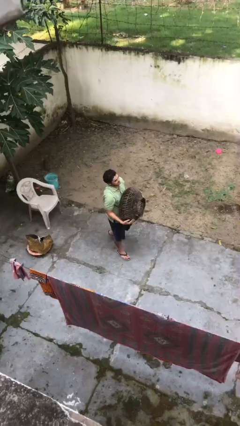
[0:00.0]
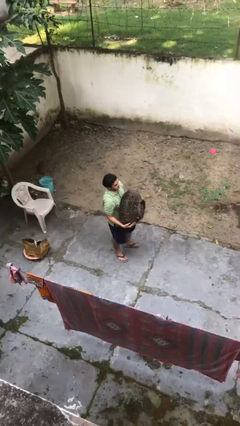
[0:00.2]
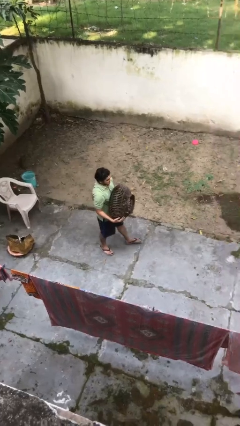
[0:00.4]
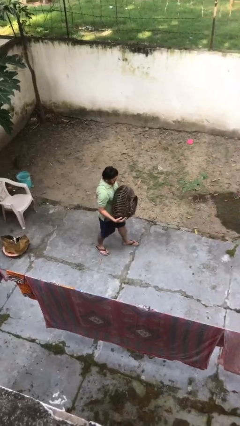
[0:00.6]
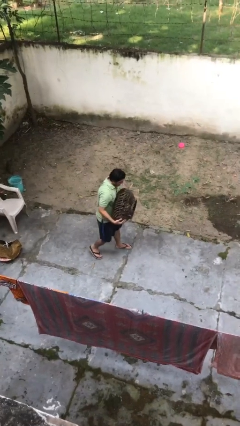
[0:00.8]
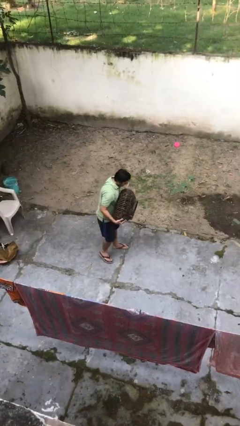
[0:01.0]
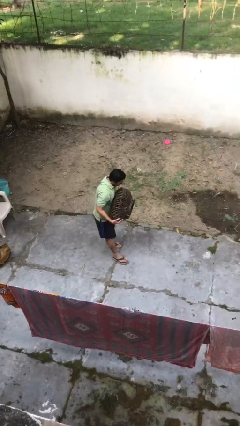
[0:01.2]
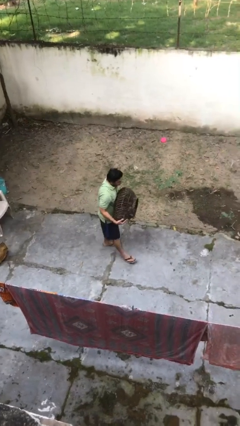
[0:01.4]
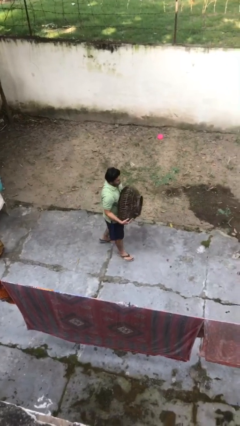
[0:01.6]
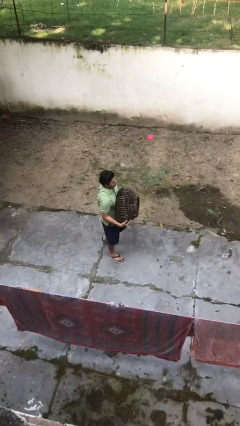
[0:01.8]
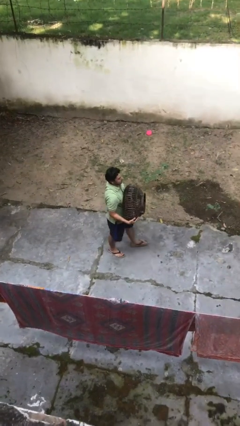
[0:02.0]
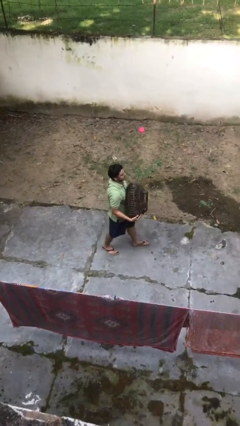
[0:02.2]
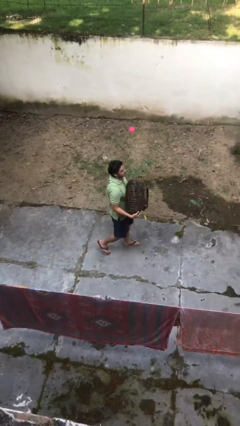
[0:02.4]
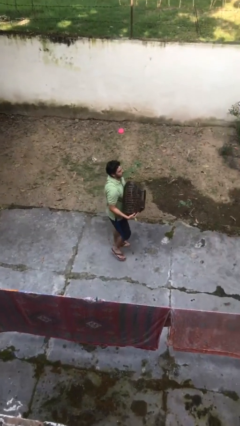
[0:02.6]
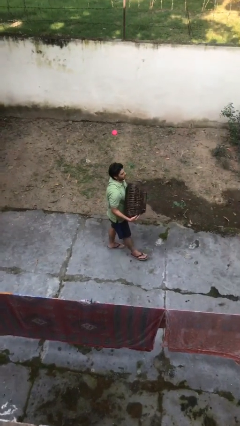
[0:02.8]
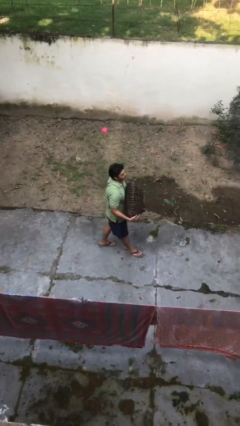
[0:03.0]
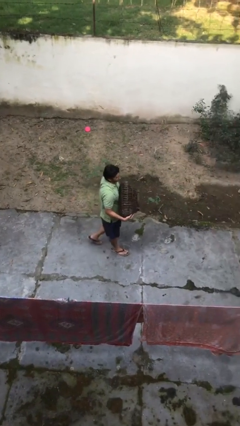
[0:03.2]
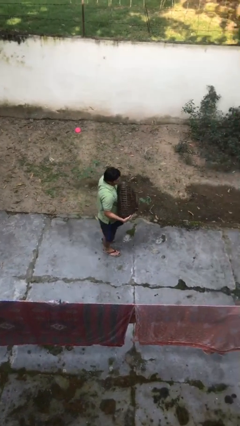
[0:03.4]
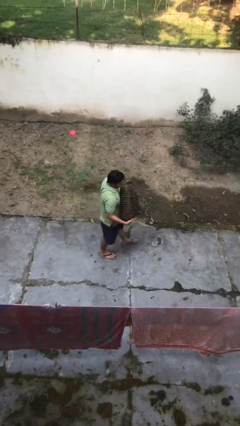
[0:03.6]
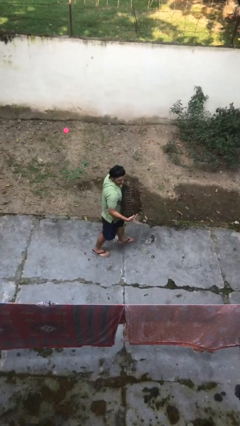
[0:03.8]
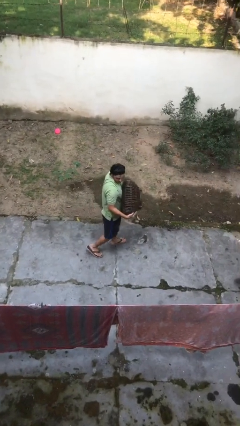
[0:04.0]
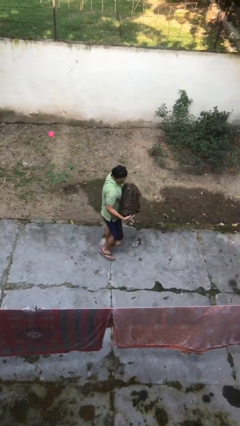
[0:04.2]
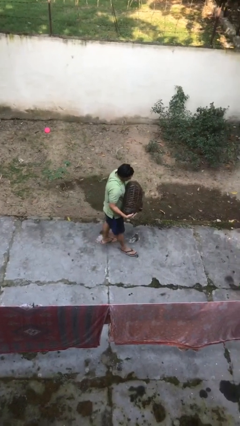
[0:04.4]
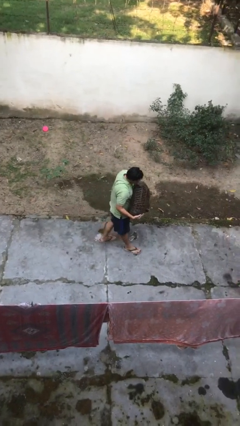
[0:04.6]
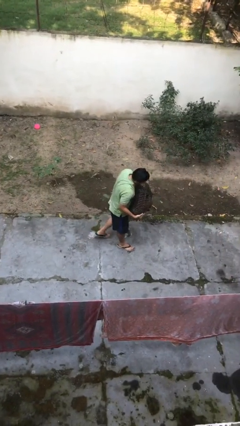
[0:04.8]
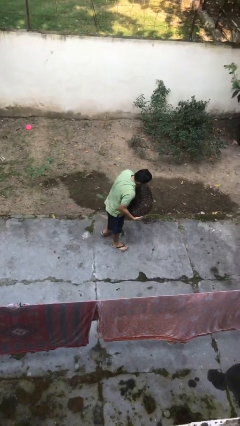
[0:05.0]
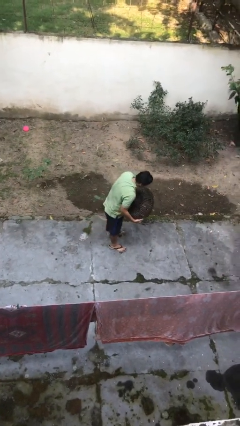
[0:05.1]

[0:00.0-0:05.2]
person carries heavy object

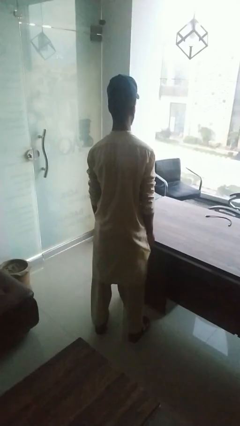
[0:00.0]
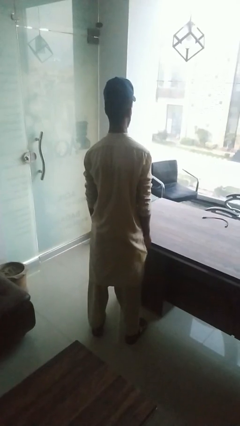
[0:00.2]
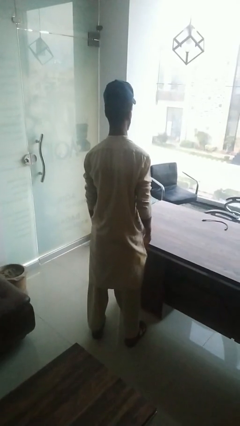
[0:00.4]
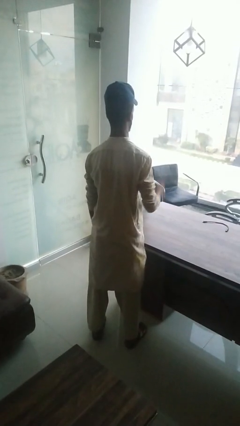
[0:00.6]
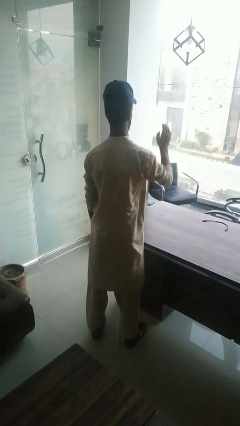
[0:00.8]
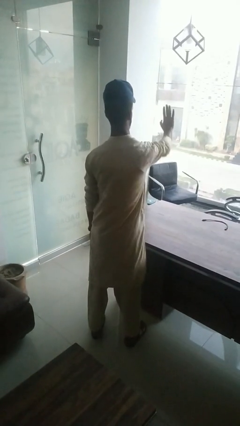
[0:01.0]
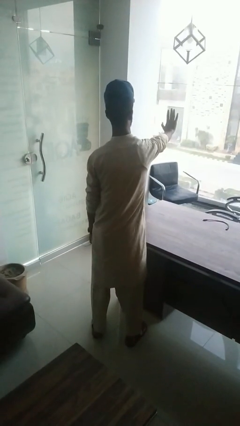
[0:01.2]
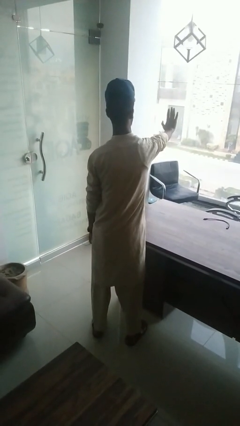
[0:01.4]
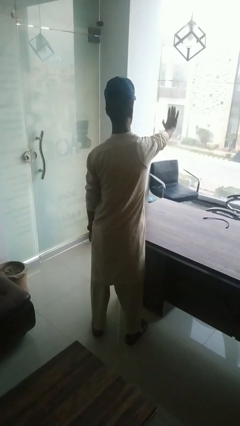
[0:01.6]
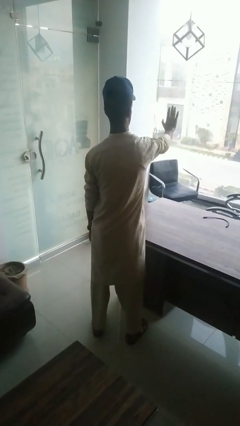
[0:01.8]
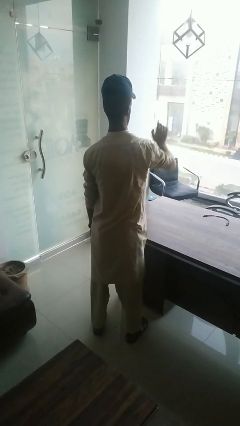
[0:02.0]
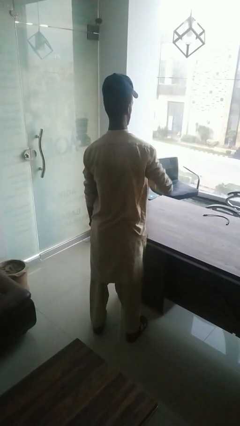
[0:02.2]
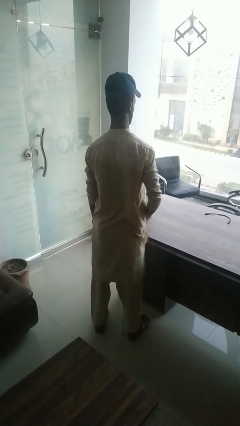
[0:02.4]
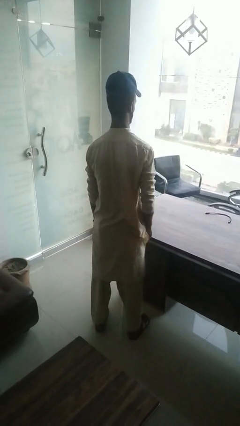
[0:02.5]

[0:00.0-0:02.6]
person gestures stop

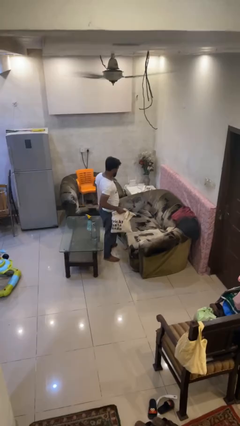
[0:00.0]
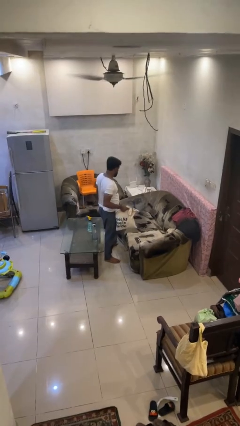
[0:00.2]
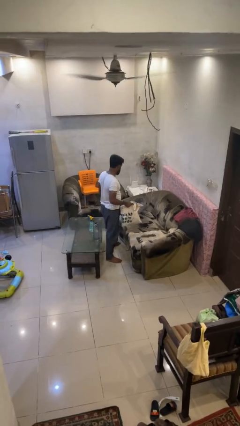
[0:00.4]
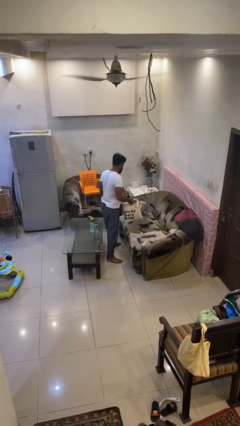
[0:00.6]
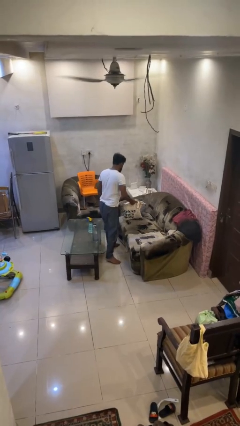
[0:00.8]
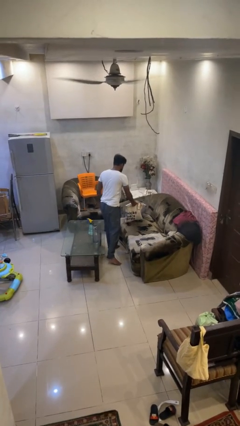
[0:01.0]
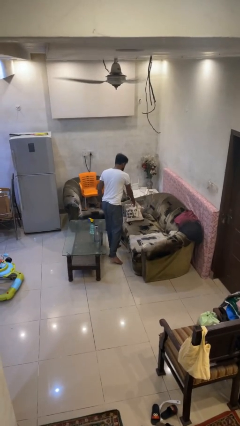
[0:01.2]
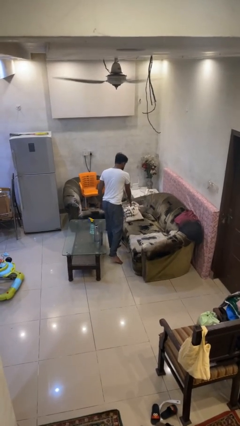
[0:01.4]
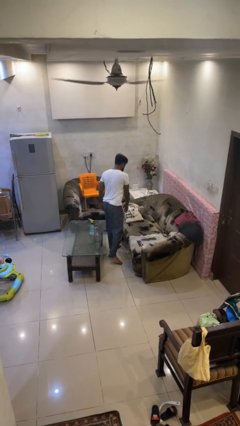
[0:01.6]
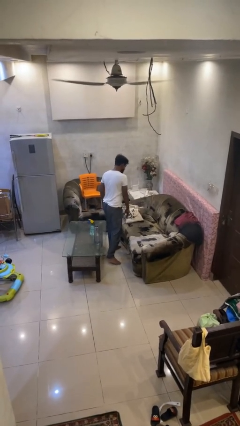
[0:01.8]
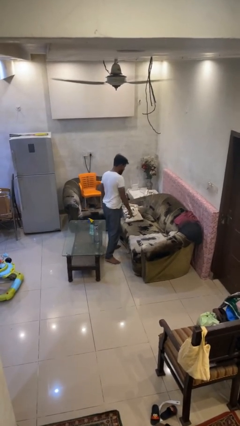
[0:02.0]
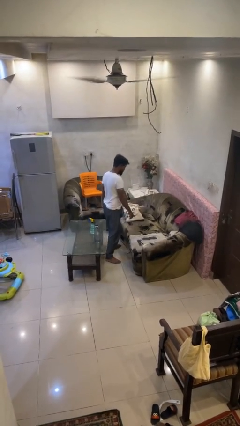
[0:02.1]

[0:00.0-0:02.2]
person puts down object on couch

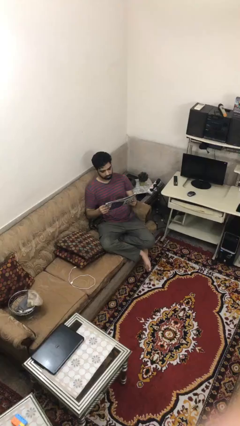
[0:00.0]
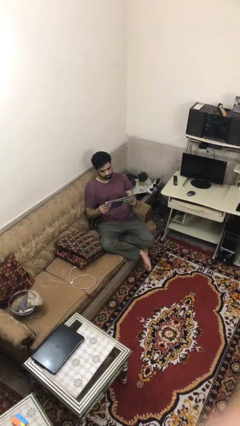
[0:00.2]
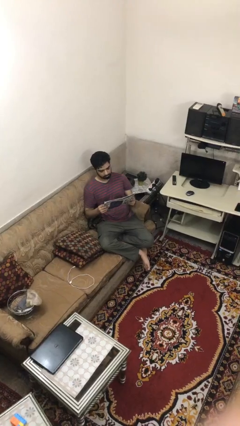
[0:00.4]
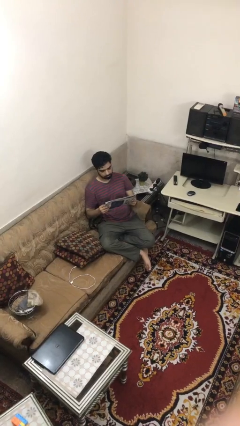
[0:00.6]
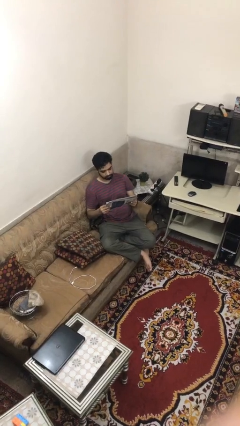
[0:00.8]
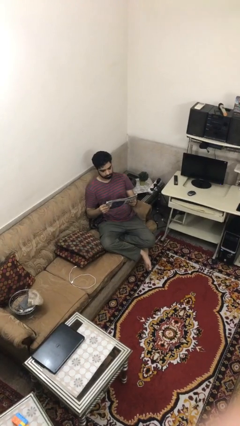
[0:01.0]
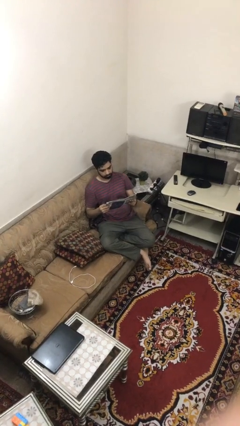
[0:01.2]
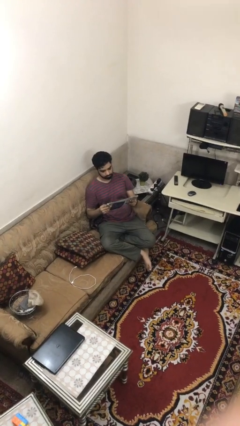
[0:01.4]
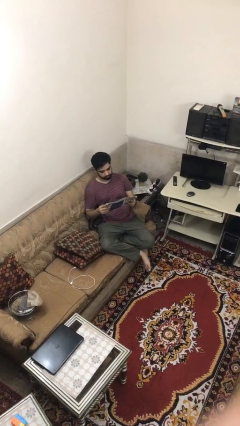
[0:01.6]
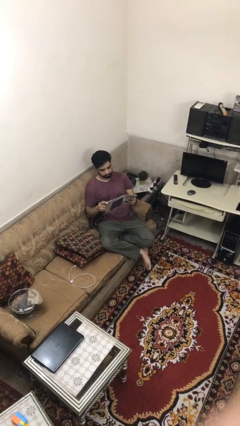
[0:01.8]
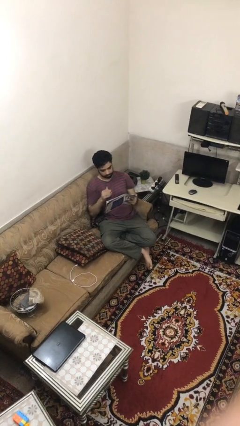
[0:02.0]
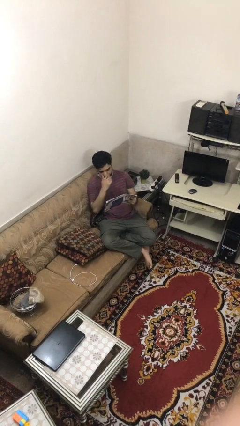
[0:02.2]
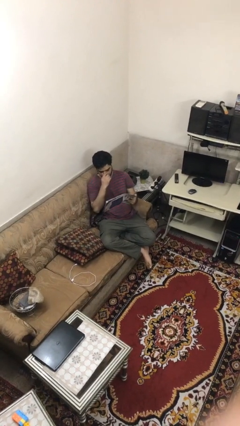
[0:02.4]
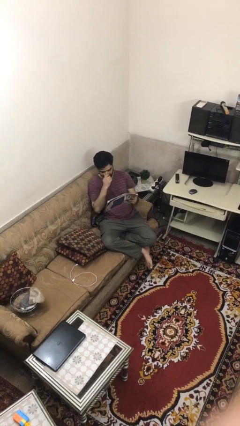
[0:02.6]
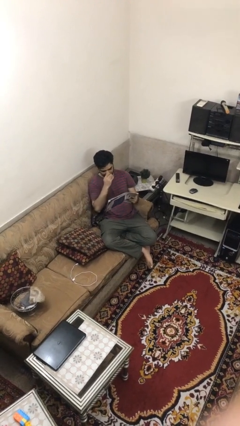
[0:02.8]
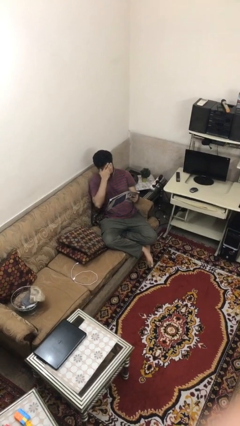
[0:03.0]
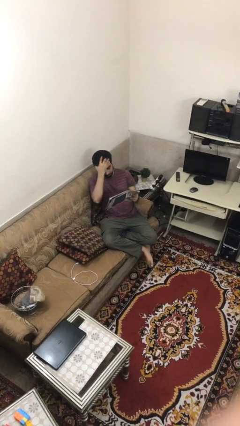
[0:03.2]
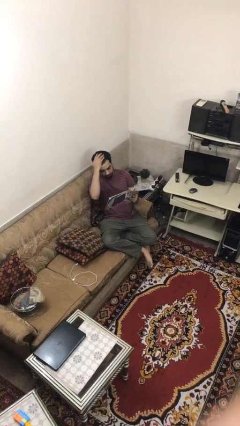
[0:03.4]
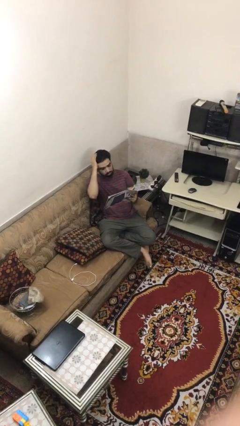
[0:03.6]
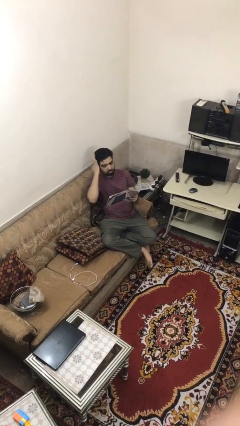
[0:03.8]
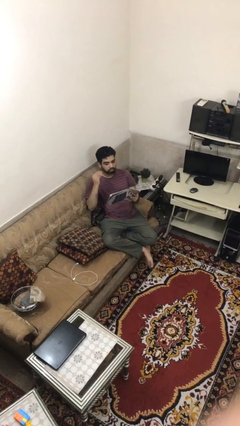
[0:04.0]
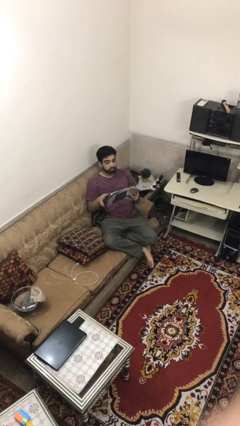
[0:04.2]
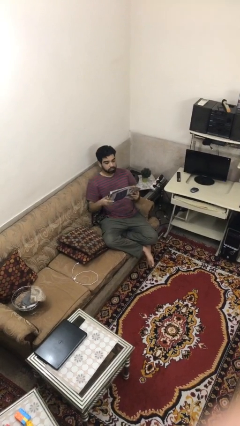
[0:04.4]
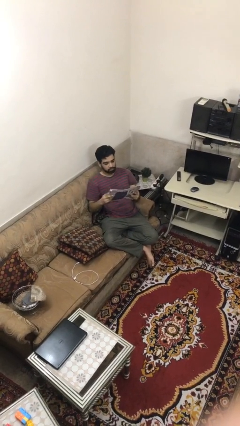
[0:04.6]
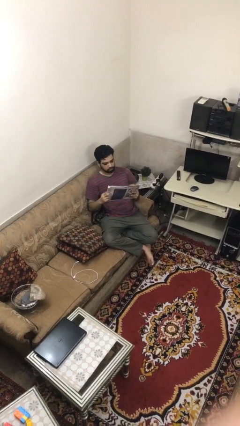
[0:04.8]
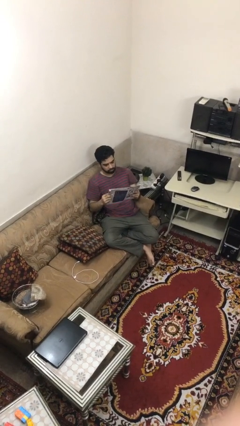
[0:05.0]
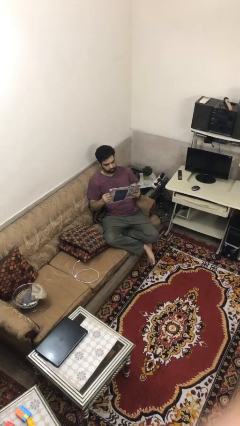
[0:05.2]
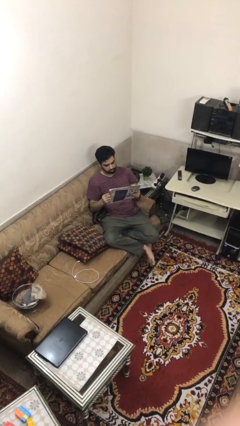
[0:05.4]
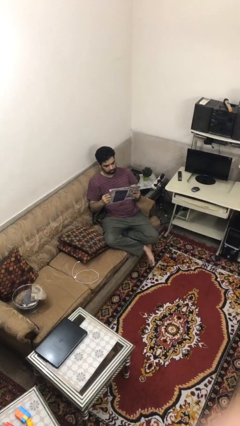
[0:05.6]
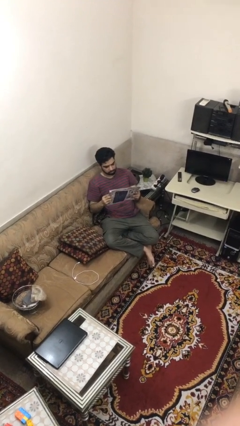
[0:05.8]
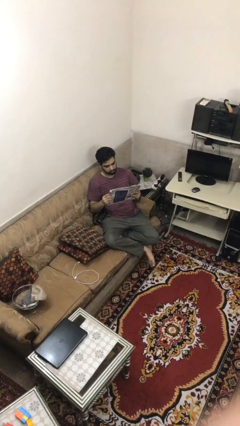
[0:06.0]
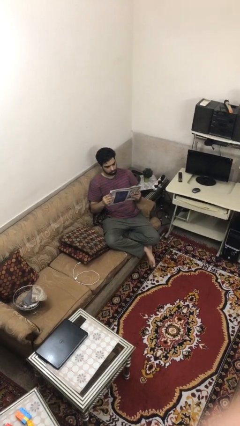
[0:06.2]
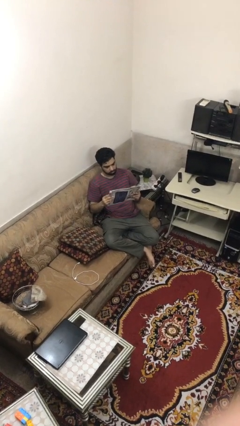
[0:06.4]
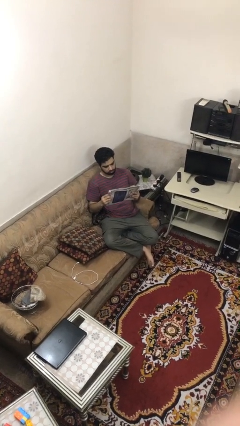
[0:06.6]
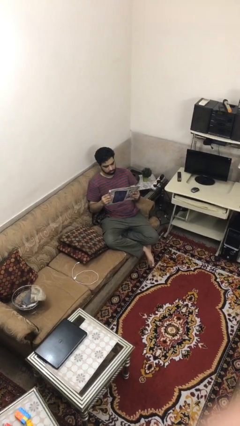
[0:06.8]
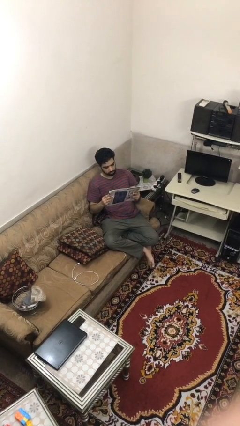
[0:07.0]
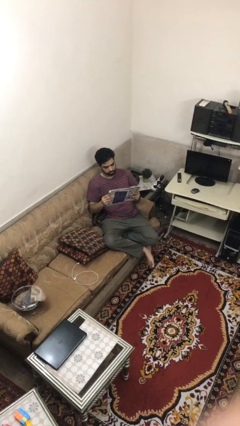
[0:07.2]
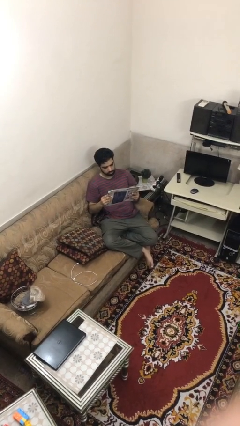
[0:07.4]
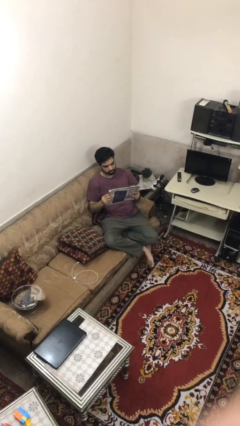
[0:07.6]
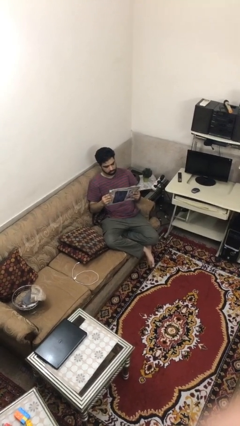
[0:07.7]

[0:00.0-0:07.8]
person reads document
